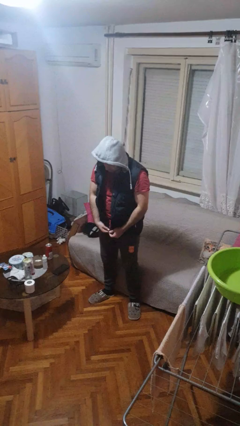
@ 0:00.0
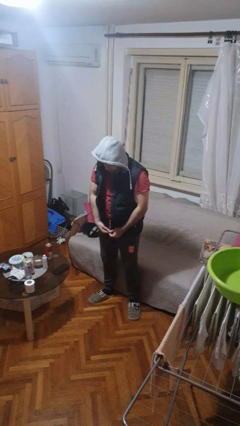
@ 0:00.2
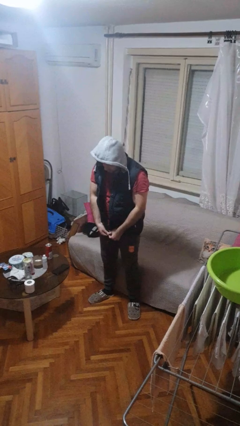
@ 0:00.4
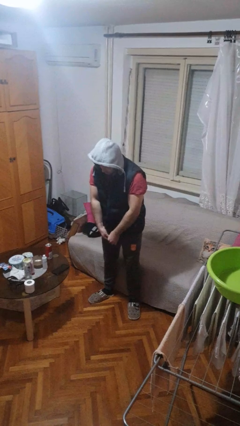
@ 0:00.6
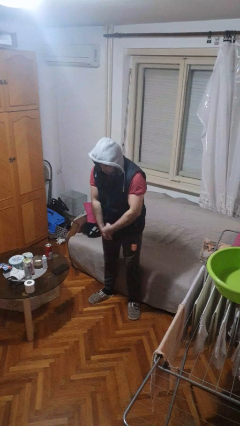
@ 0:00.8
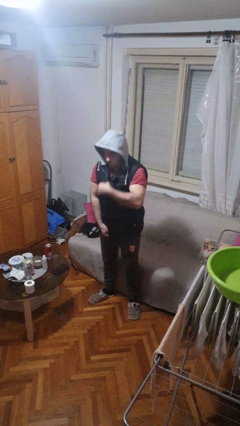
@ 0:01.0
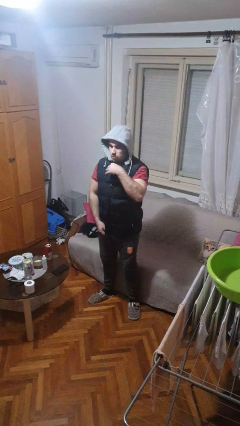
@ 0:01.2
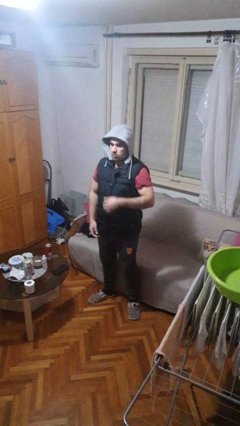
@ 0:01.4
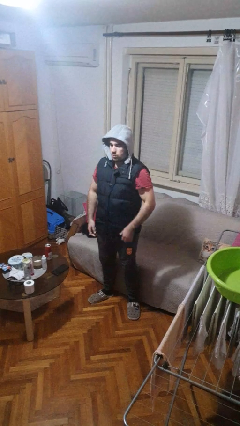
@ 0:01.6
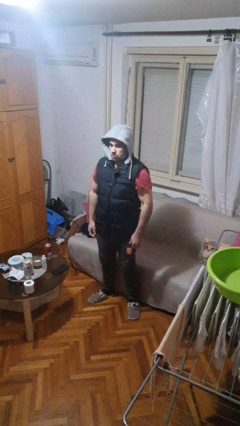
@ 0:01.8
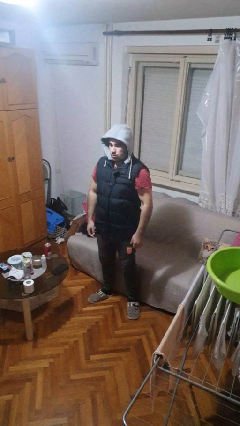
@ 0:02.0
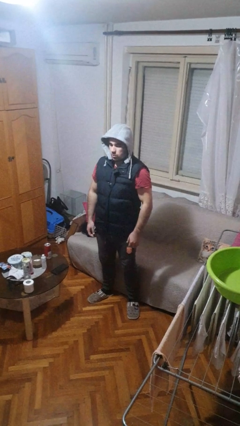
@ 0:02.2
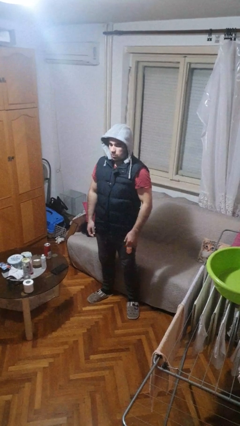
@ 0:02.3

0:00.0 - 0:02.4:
person zips up jacket

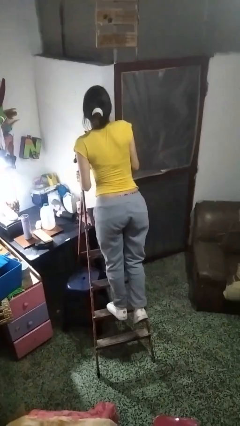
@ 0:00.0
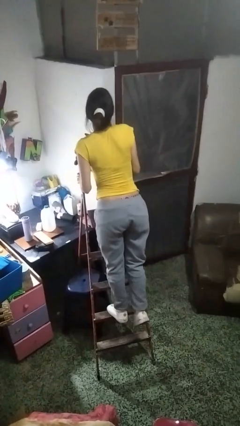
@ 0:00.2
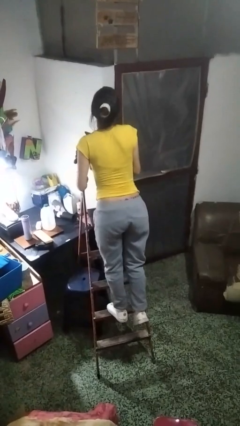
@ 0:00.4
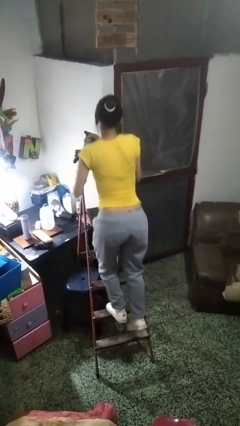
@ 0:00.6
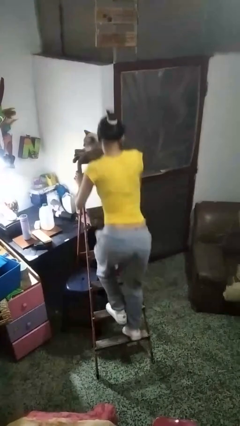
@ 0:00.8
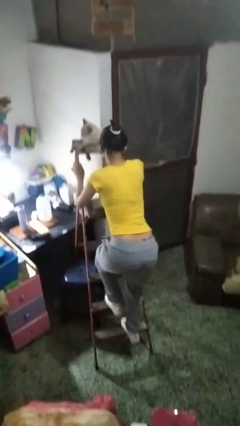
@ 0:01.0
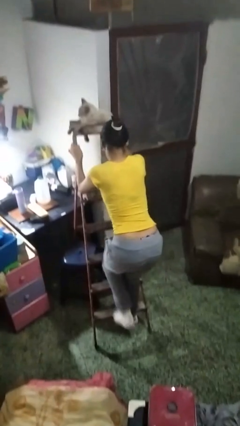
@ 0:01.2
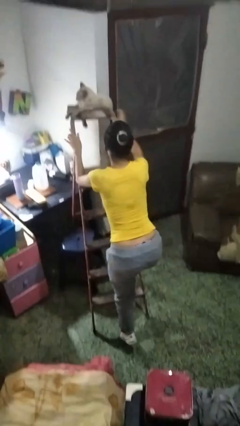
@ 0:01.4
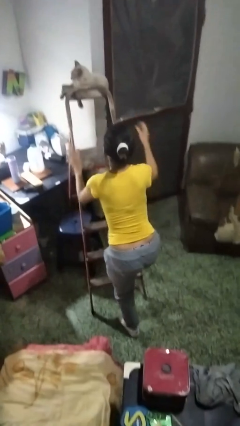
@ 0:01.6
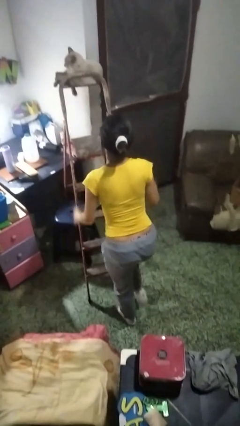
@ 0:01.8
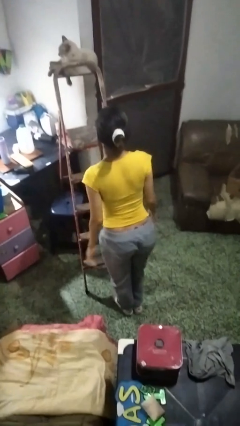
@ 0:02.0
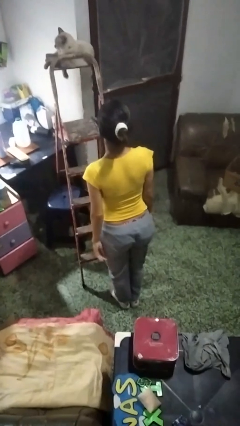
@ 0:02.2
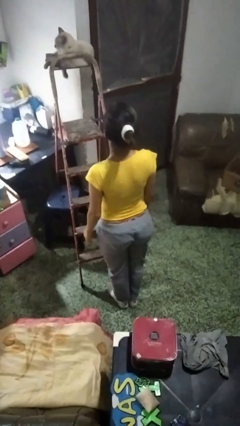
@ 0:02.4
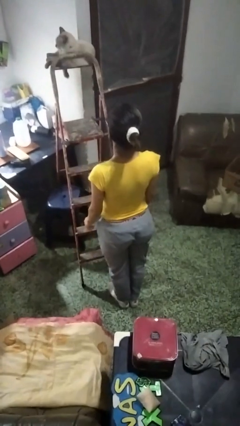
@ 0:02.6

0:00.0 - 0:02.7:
person climbs down ladder

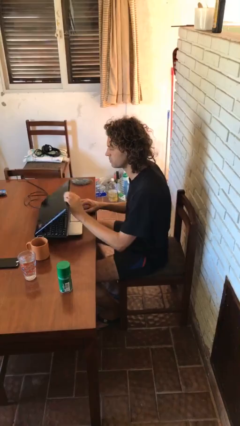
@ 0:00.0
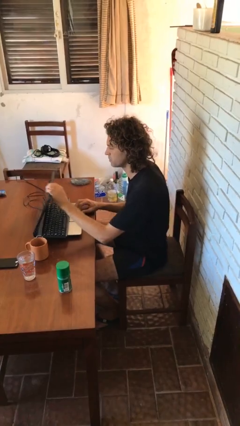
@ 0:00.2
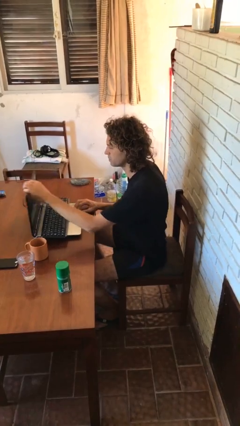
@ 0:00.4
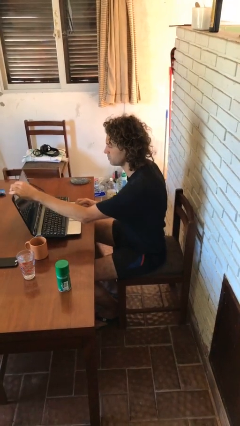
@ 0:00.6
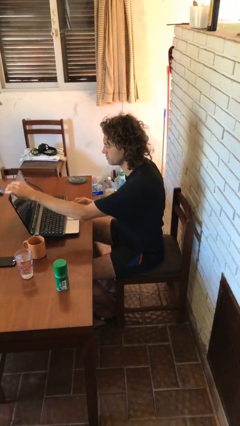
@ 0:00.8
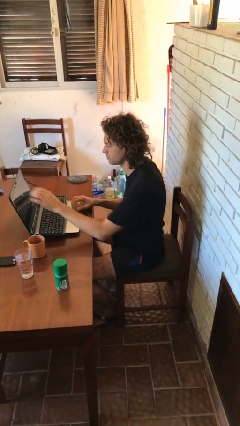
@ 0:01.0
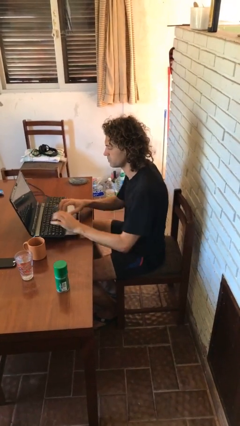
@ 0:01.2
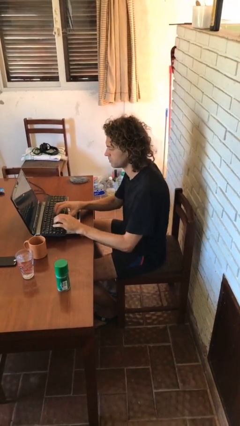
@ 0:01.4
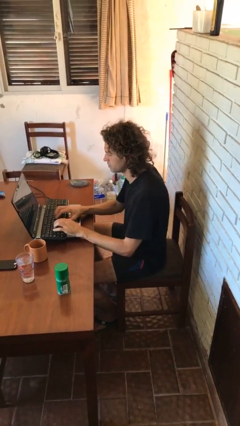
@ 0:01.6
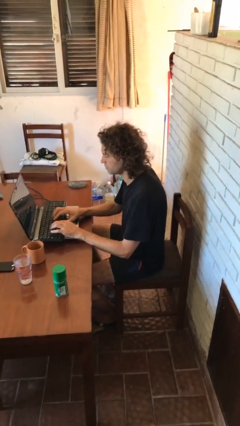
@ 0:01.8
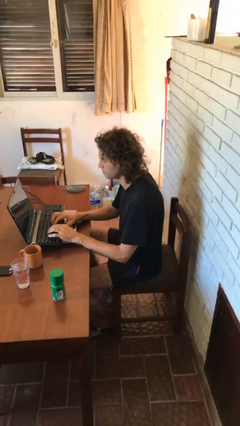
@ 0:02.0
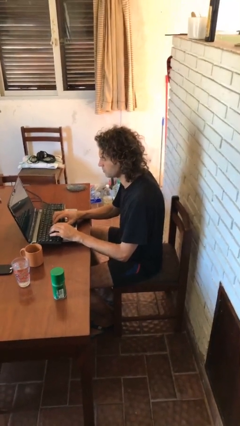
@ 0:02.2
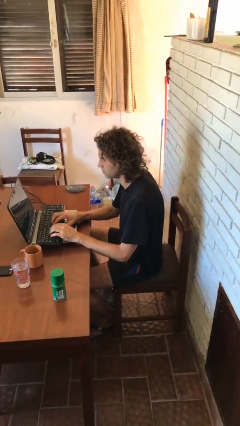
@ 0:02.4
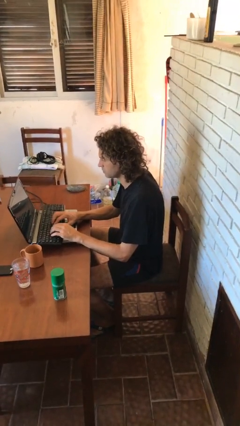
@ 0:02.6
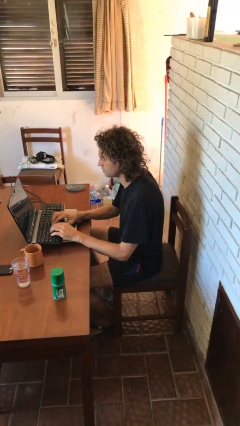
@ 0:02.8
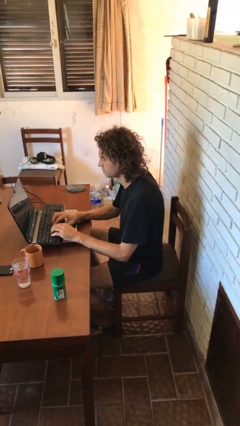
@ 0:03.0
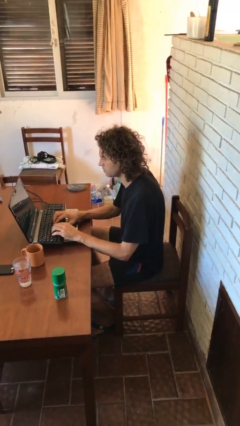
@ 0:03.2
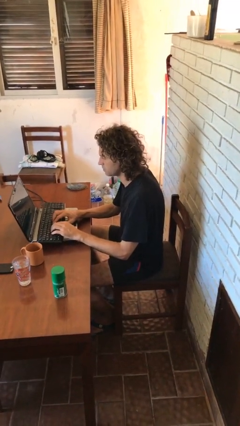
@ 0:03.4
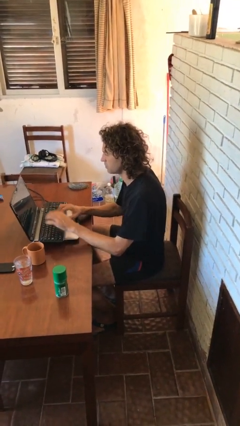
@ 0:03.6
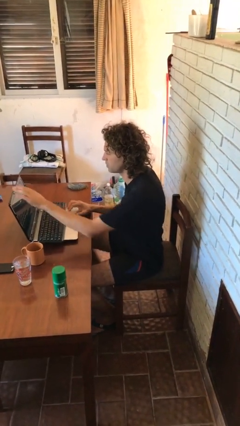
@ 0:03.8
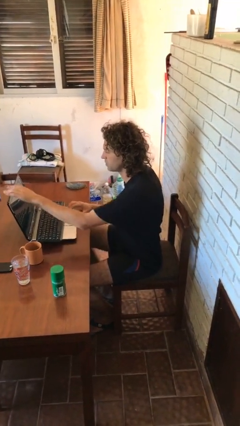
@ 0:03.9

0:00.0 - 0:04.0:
person interacts with laptop

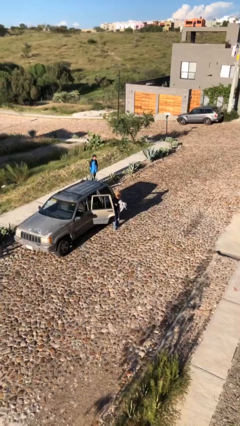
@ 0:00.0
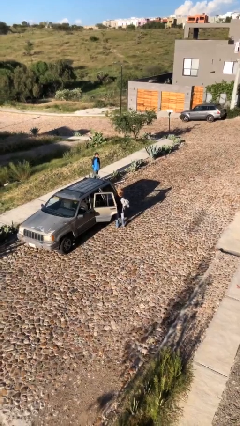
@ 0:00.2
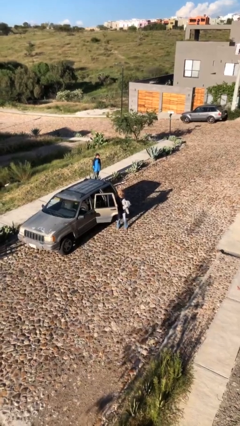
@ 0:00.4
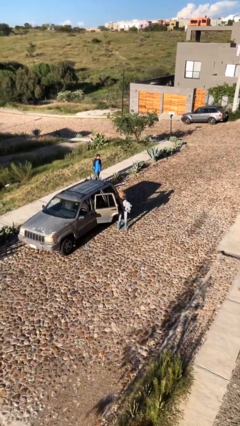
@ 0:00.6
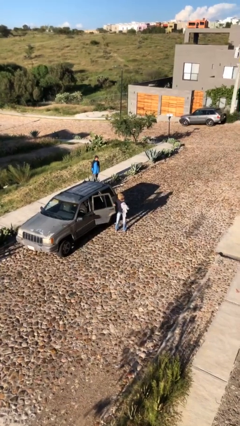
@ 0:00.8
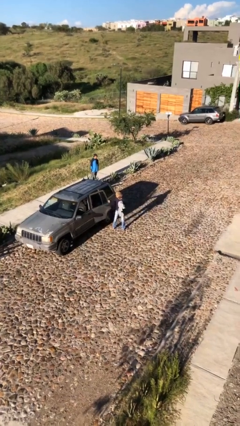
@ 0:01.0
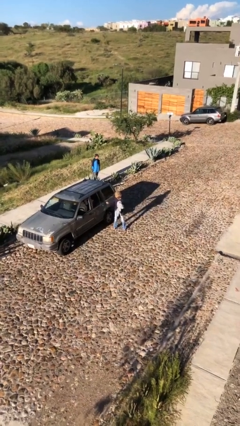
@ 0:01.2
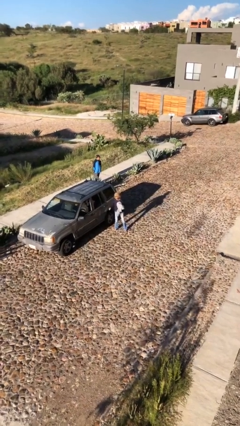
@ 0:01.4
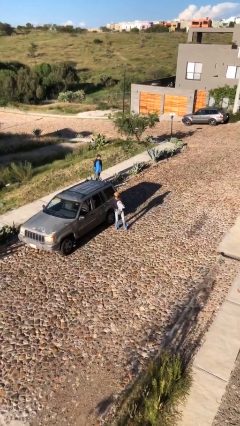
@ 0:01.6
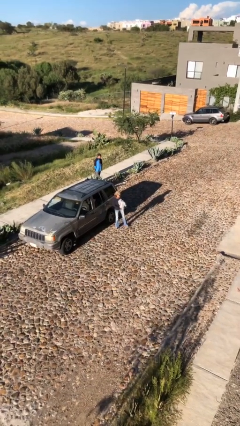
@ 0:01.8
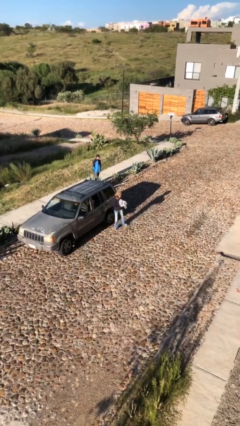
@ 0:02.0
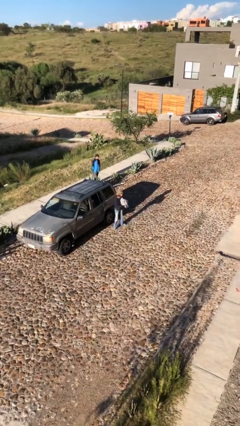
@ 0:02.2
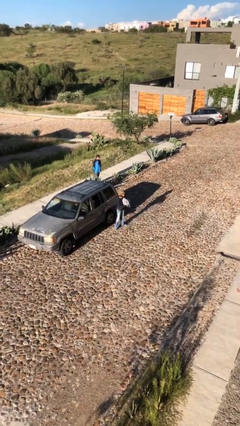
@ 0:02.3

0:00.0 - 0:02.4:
person closes car door

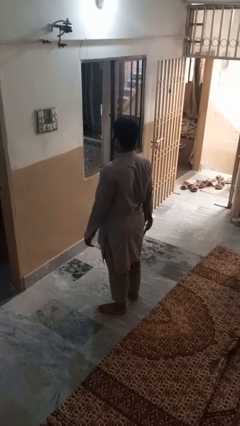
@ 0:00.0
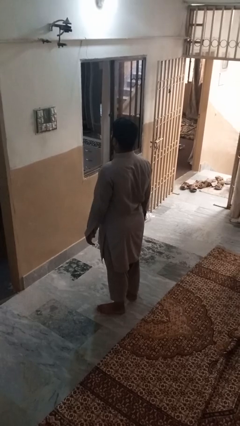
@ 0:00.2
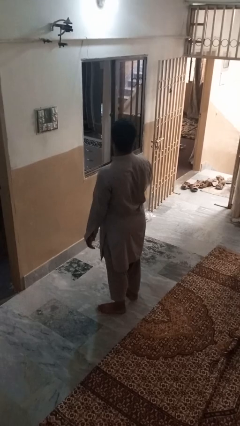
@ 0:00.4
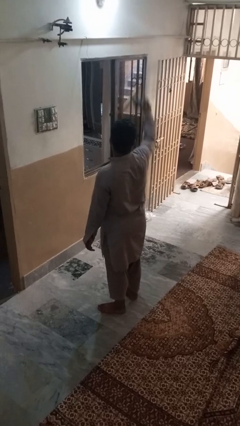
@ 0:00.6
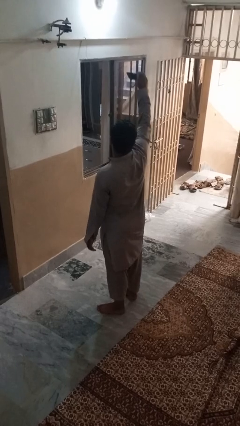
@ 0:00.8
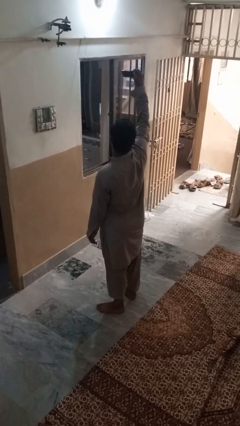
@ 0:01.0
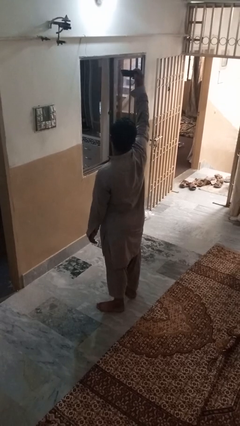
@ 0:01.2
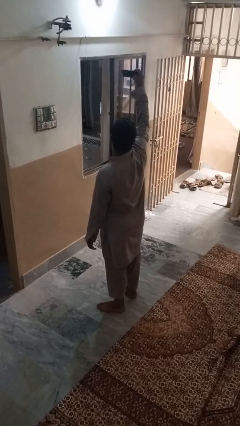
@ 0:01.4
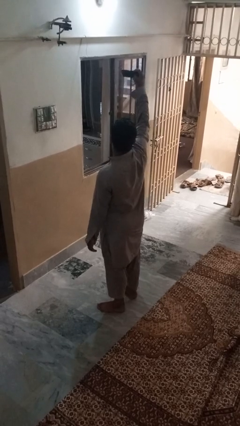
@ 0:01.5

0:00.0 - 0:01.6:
person takes selfie

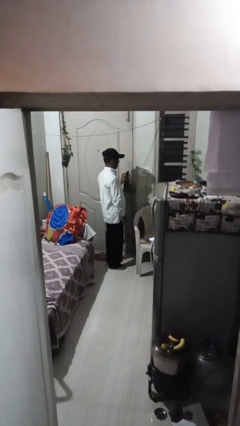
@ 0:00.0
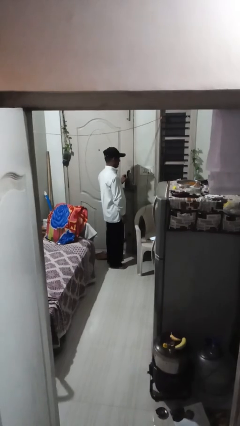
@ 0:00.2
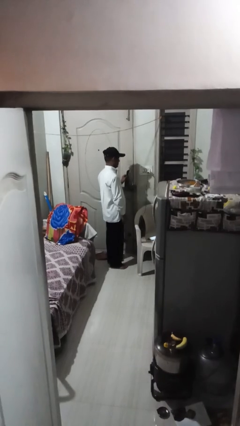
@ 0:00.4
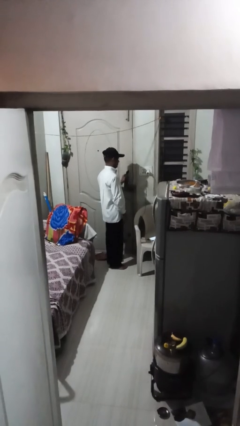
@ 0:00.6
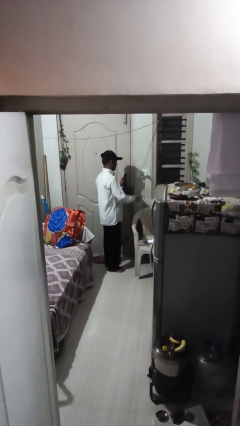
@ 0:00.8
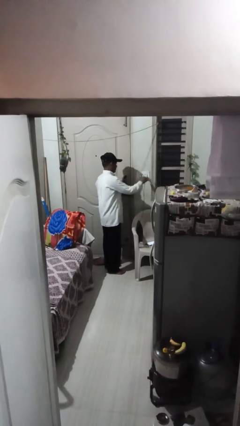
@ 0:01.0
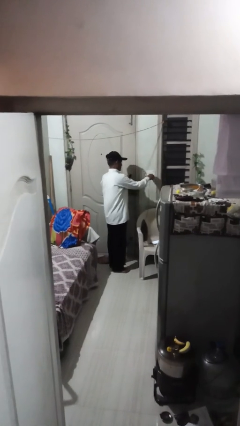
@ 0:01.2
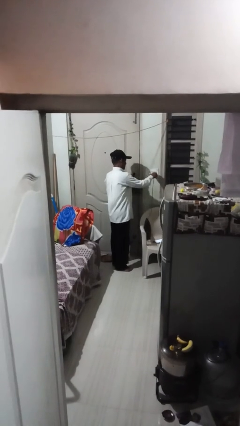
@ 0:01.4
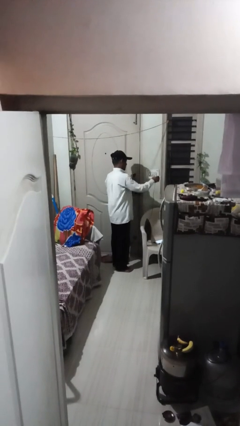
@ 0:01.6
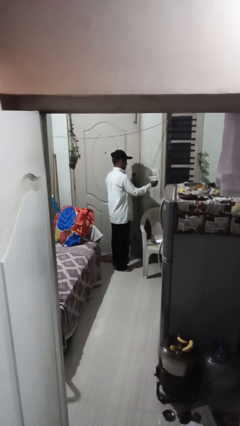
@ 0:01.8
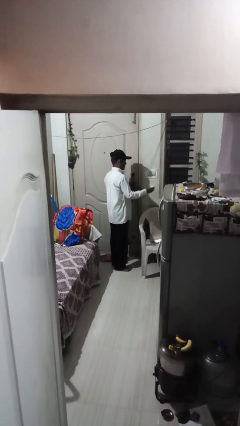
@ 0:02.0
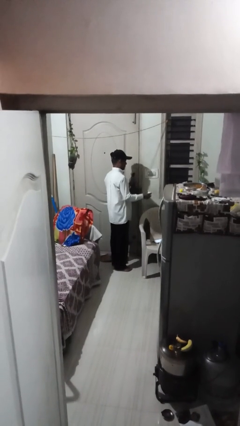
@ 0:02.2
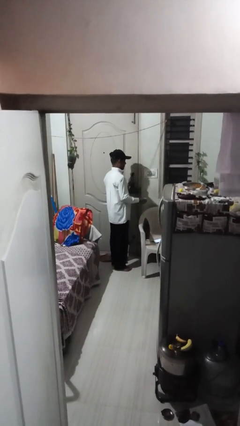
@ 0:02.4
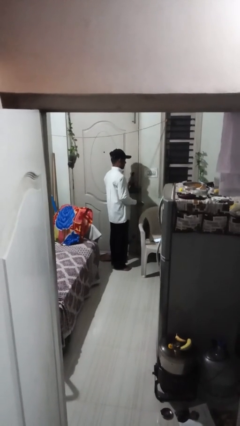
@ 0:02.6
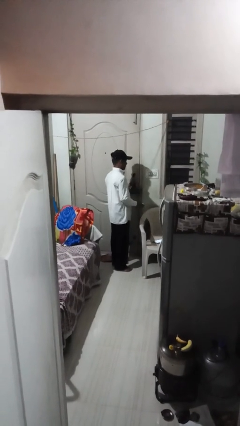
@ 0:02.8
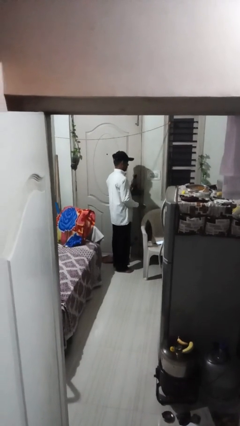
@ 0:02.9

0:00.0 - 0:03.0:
person unplugs from electrical socket

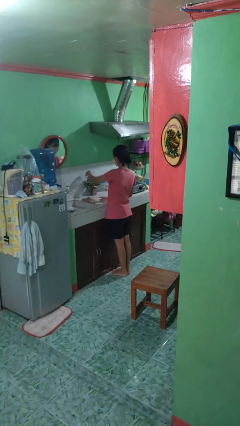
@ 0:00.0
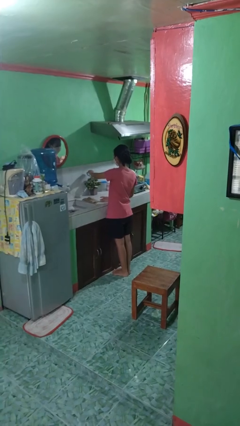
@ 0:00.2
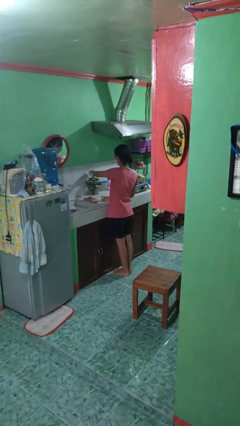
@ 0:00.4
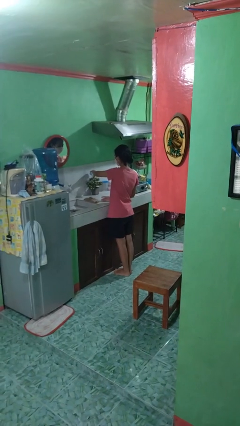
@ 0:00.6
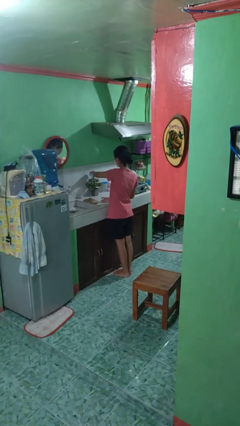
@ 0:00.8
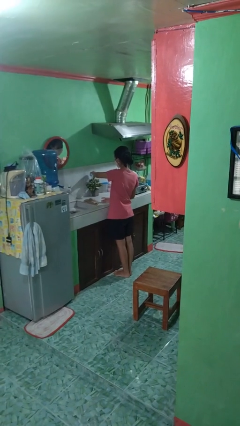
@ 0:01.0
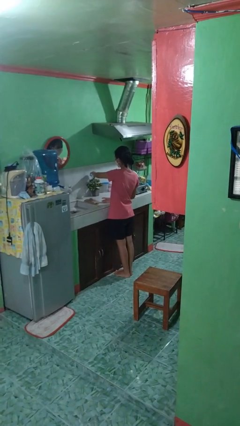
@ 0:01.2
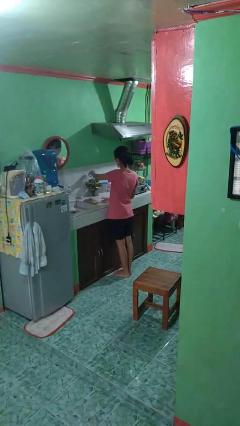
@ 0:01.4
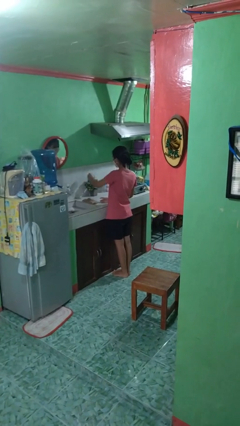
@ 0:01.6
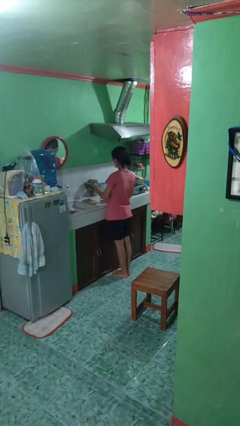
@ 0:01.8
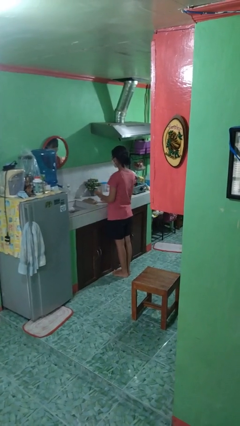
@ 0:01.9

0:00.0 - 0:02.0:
person waters houseplant
